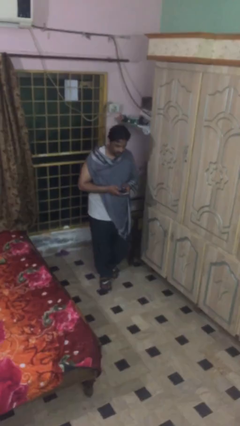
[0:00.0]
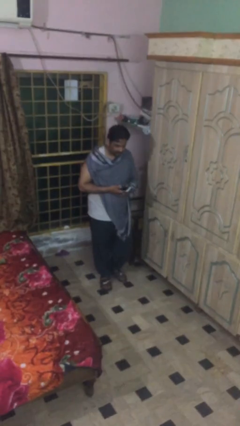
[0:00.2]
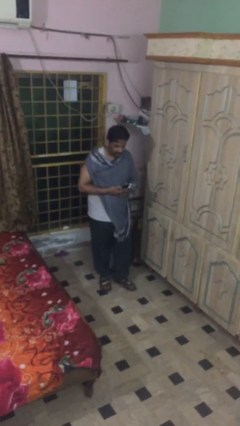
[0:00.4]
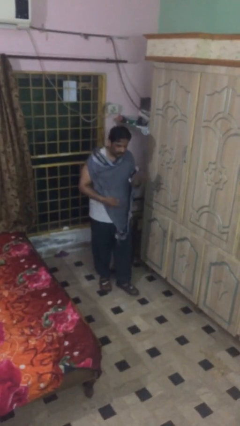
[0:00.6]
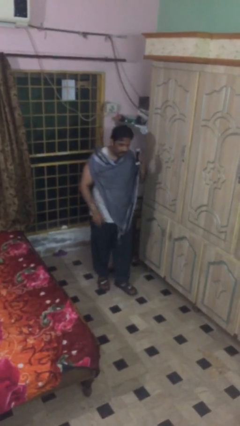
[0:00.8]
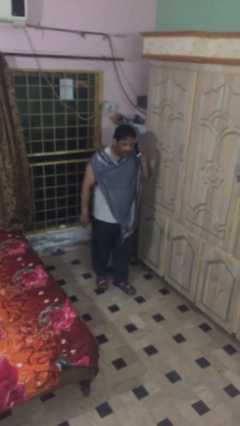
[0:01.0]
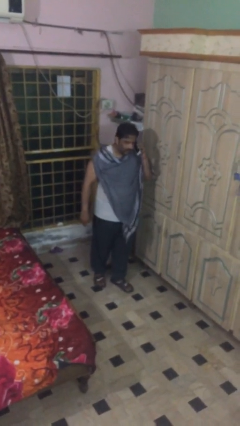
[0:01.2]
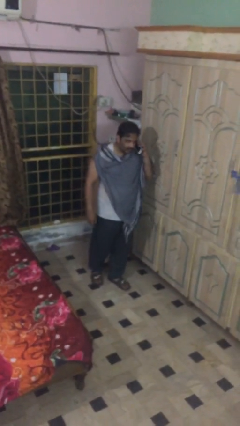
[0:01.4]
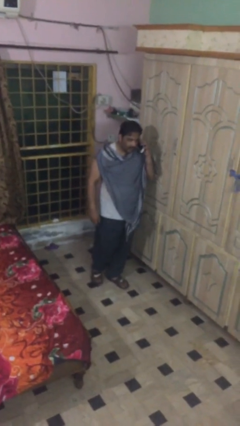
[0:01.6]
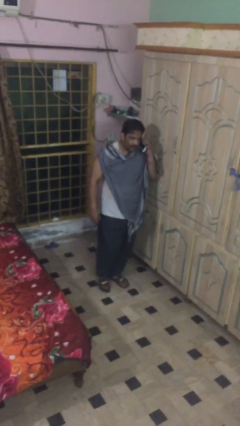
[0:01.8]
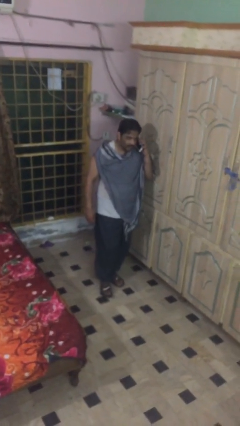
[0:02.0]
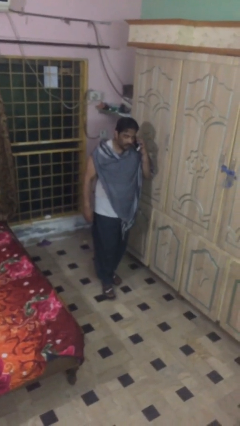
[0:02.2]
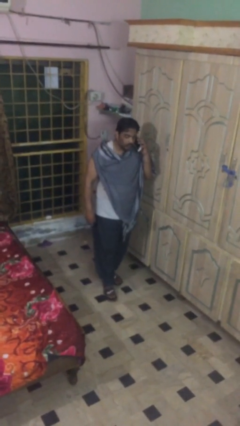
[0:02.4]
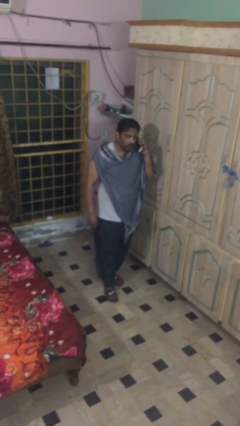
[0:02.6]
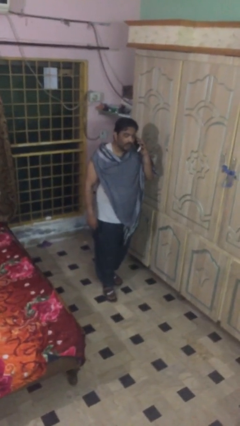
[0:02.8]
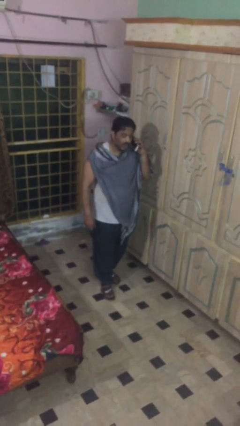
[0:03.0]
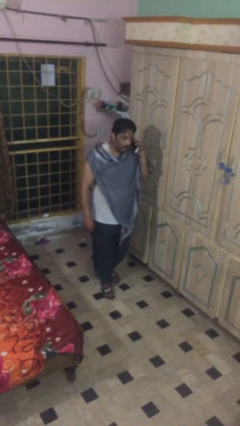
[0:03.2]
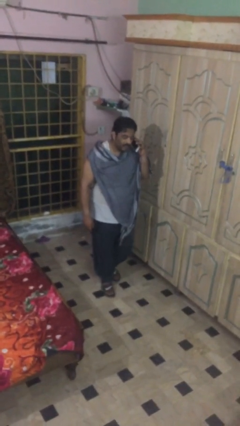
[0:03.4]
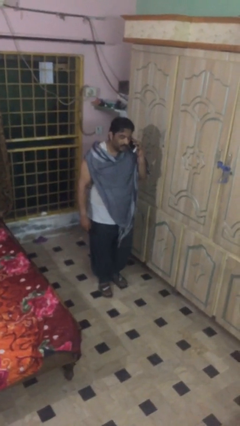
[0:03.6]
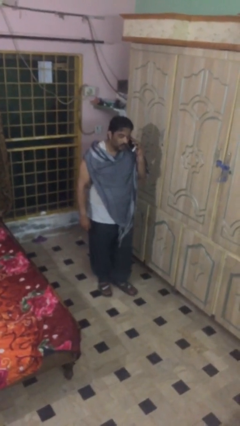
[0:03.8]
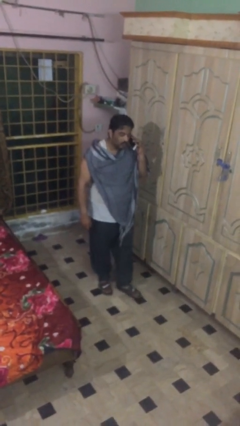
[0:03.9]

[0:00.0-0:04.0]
person talks on phone

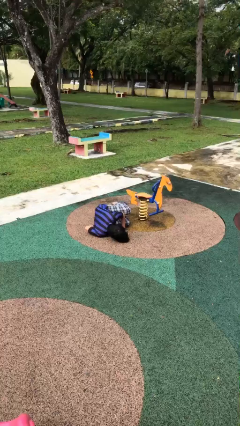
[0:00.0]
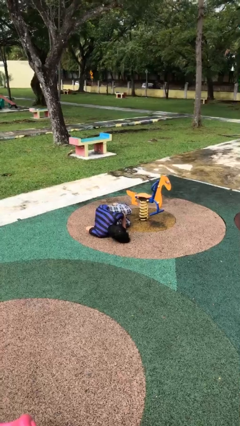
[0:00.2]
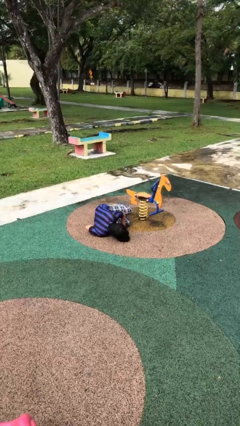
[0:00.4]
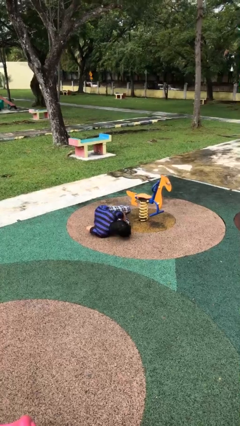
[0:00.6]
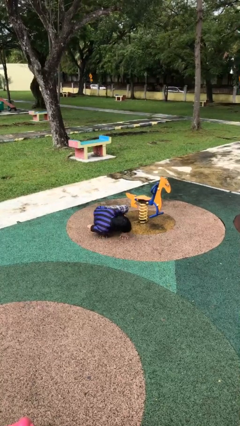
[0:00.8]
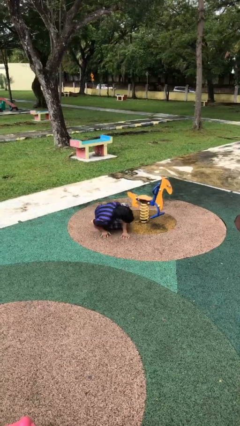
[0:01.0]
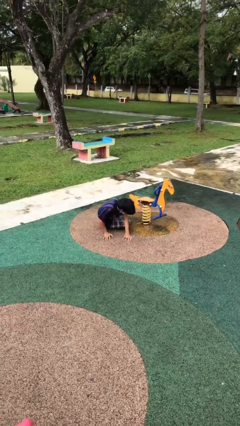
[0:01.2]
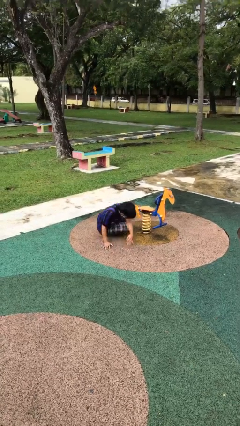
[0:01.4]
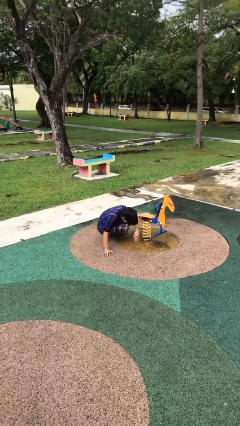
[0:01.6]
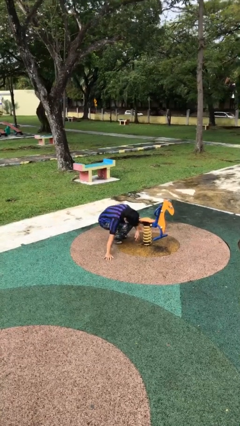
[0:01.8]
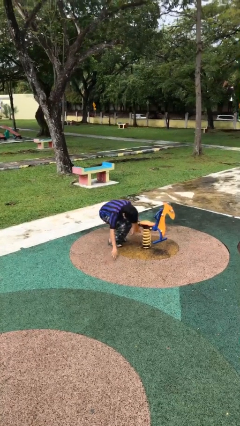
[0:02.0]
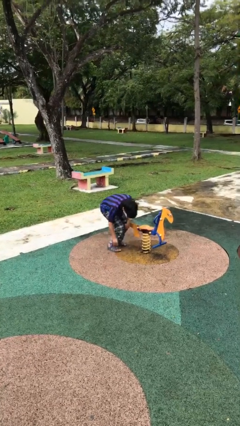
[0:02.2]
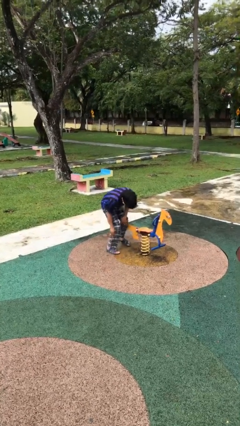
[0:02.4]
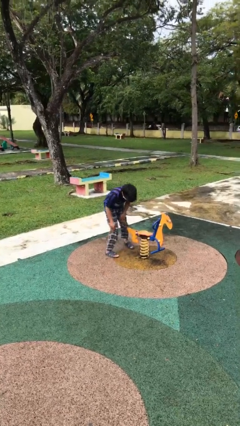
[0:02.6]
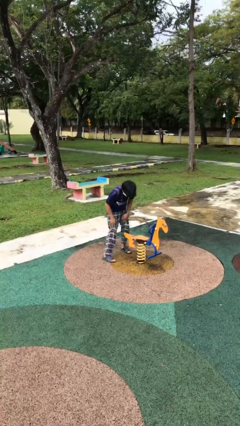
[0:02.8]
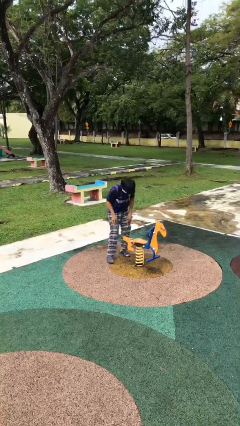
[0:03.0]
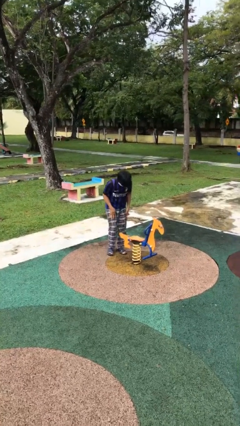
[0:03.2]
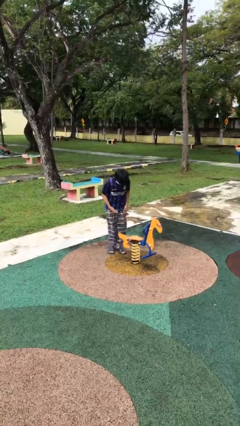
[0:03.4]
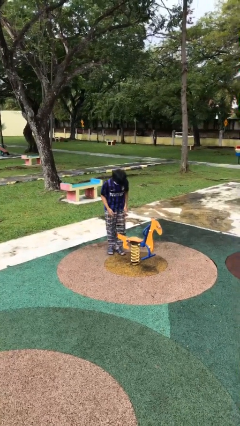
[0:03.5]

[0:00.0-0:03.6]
person stands up from floor

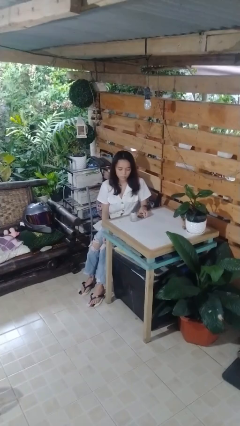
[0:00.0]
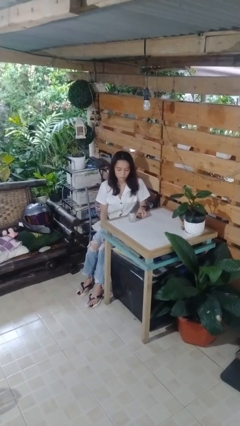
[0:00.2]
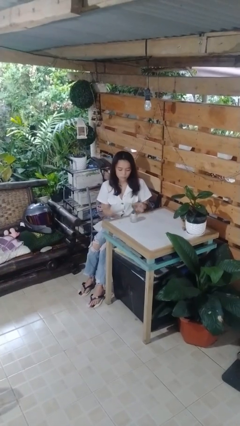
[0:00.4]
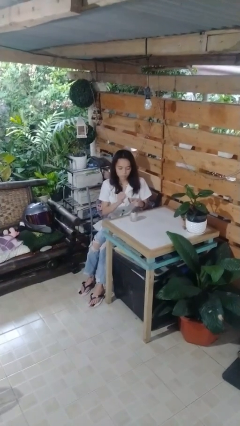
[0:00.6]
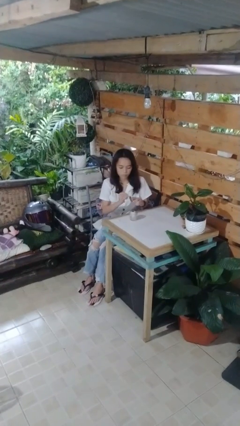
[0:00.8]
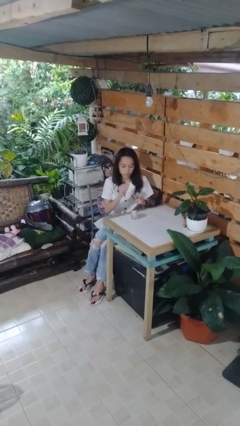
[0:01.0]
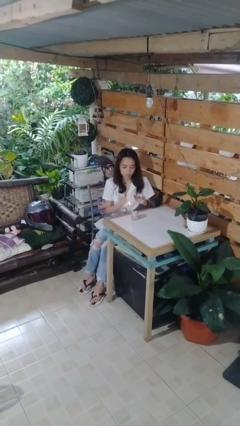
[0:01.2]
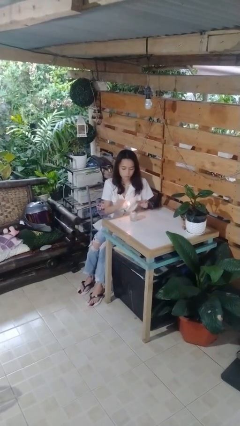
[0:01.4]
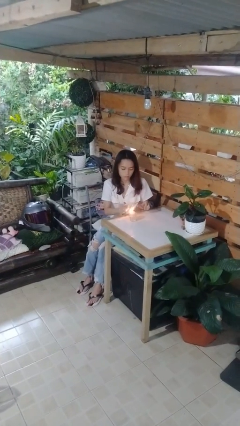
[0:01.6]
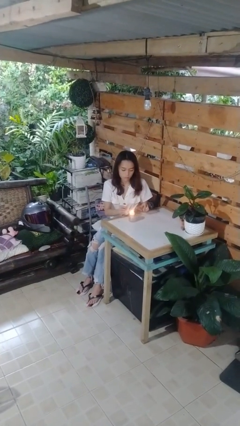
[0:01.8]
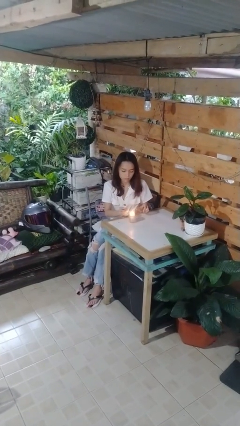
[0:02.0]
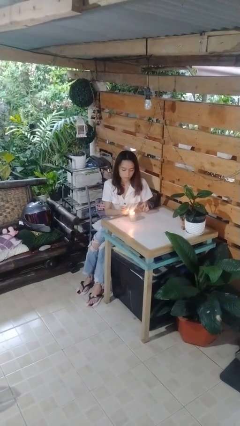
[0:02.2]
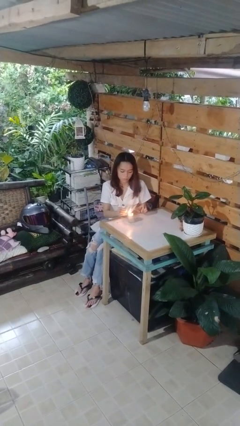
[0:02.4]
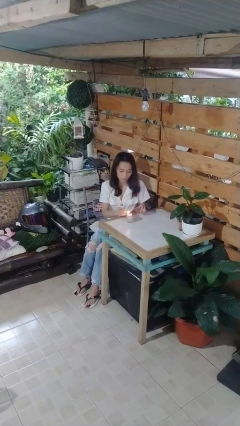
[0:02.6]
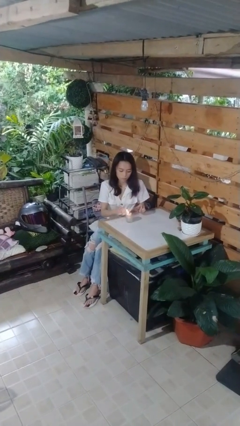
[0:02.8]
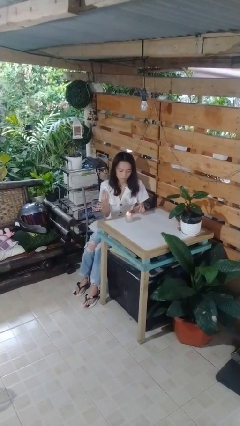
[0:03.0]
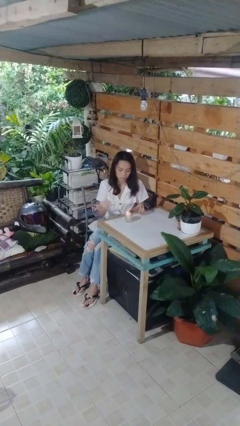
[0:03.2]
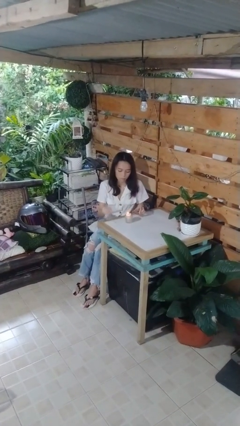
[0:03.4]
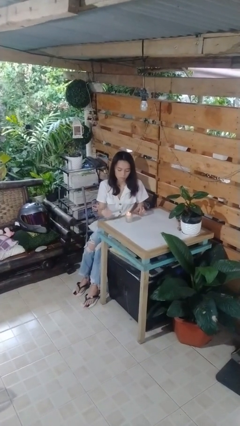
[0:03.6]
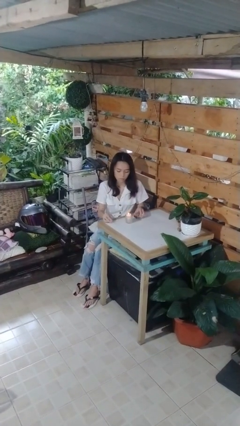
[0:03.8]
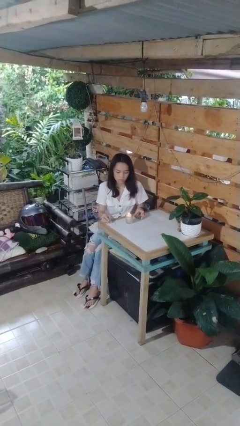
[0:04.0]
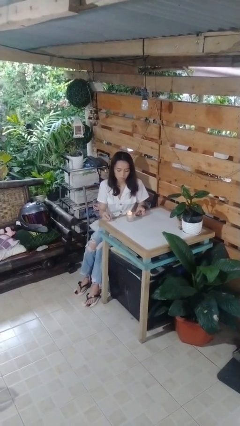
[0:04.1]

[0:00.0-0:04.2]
person lights candle

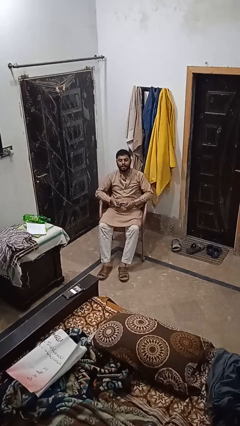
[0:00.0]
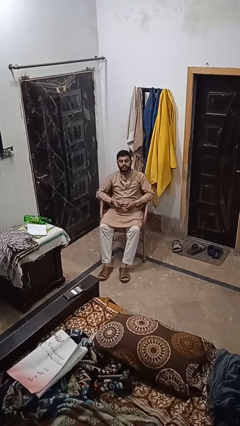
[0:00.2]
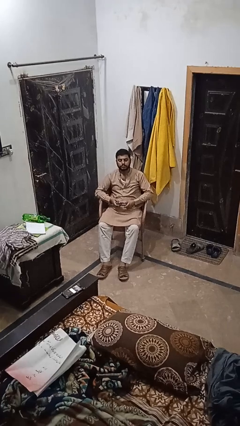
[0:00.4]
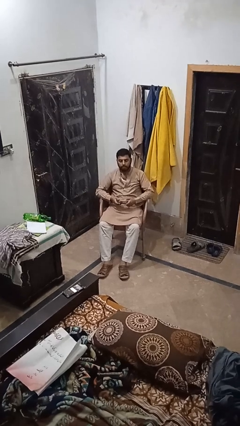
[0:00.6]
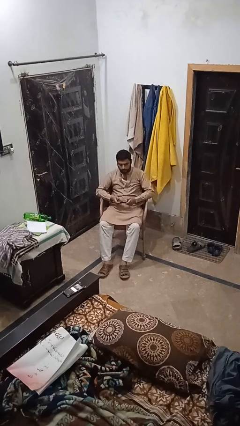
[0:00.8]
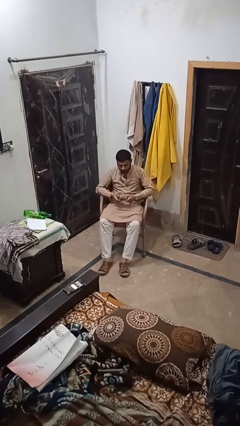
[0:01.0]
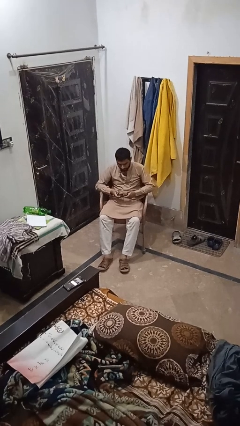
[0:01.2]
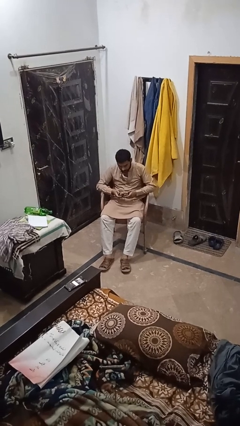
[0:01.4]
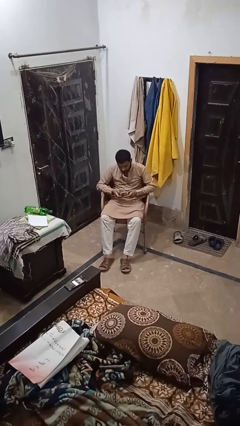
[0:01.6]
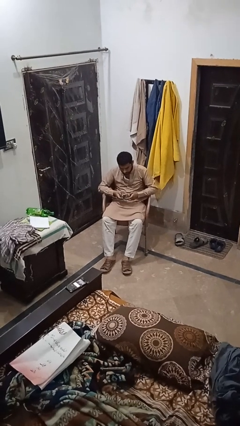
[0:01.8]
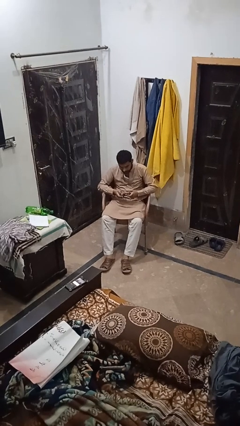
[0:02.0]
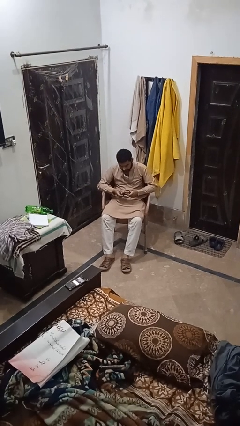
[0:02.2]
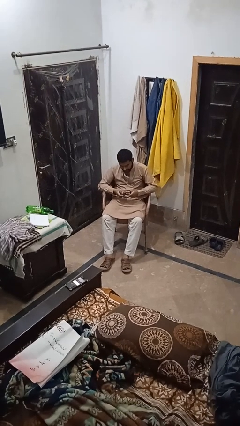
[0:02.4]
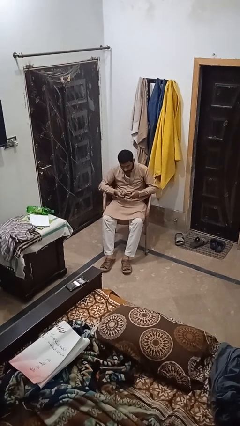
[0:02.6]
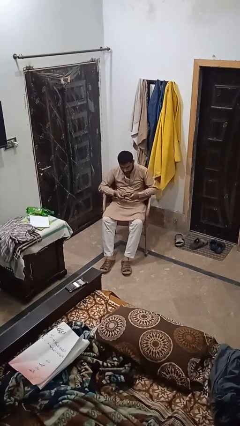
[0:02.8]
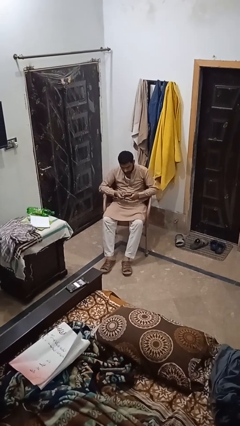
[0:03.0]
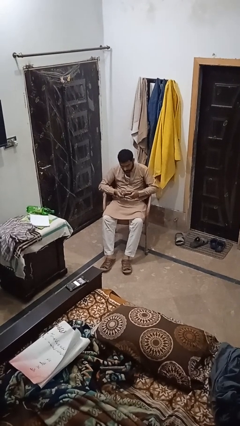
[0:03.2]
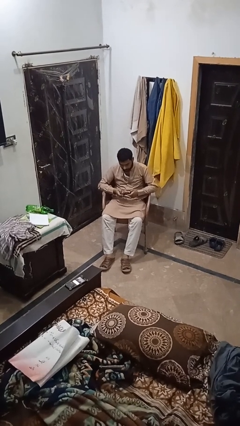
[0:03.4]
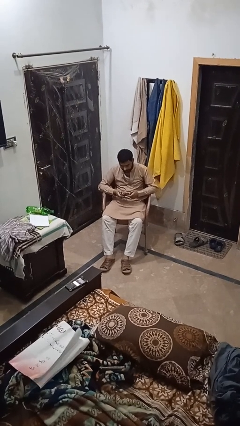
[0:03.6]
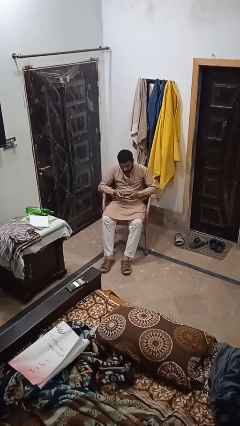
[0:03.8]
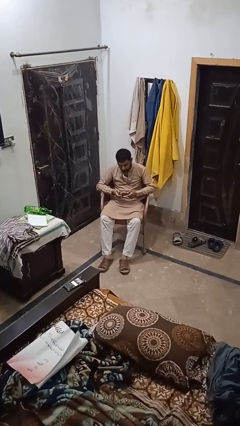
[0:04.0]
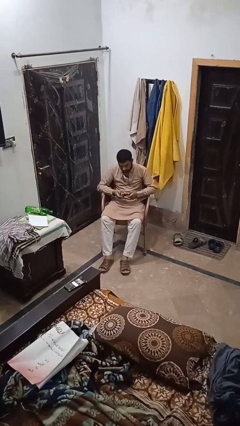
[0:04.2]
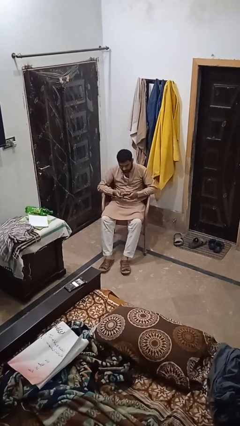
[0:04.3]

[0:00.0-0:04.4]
person interacts with handheld game

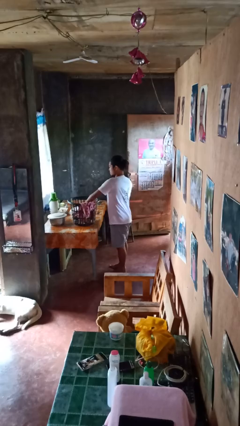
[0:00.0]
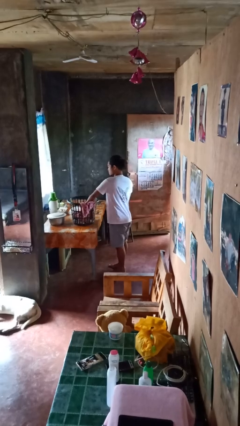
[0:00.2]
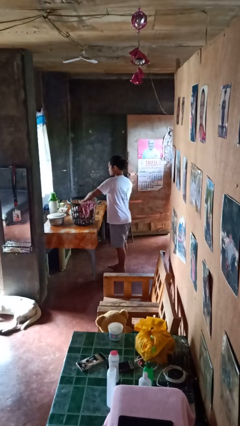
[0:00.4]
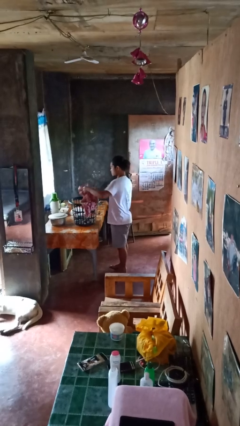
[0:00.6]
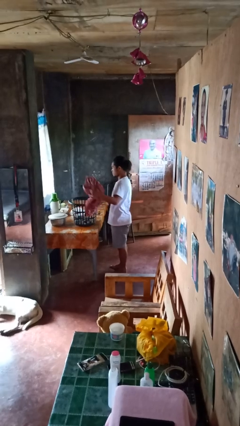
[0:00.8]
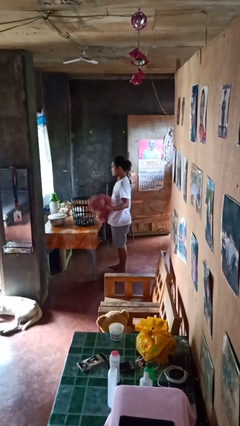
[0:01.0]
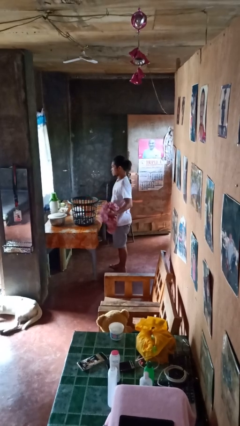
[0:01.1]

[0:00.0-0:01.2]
person takes object from basket
